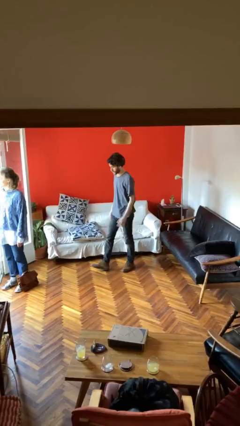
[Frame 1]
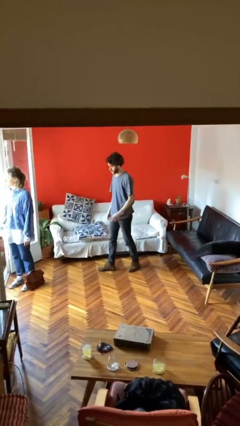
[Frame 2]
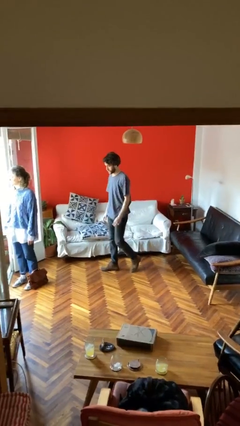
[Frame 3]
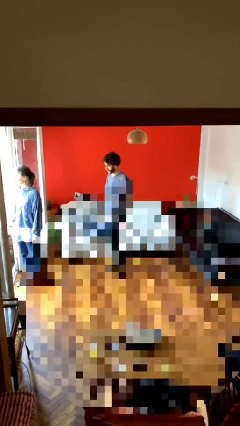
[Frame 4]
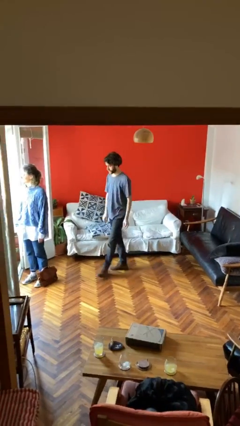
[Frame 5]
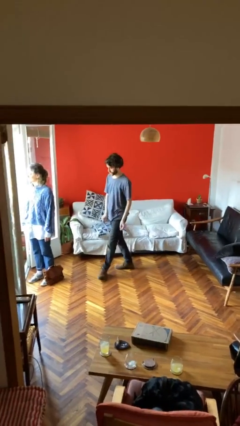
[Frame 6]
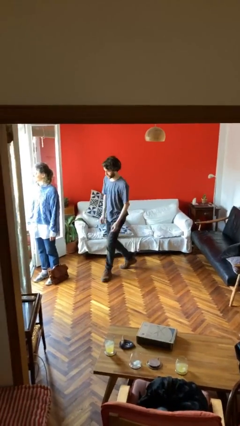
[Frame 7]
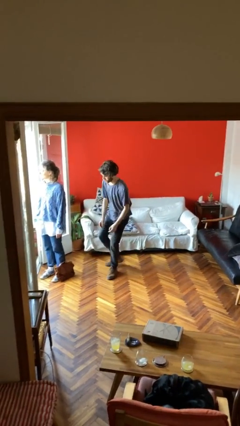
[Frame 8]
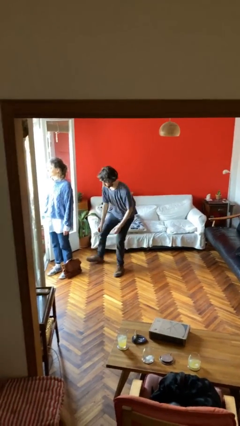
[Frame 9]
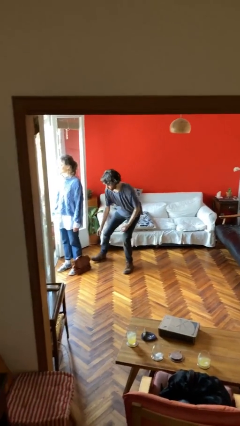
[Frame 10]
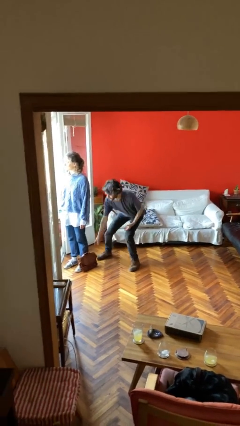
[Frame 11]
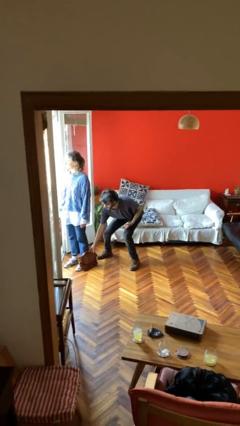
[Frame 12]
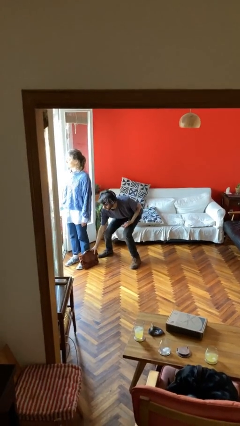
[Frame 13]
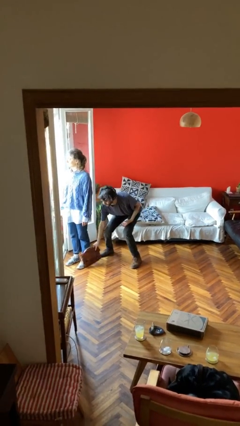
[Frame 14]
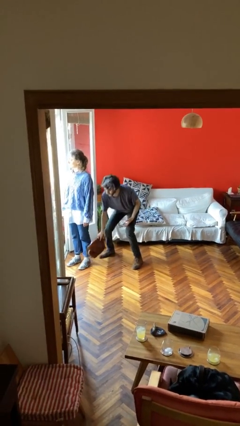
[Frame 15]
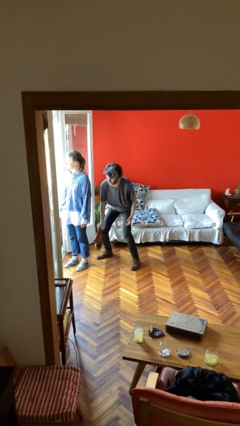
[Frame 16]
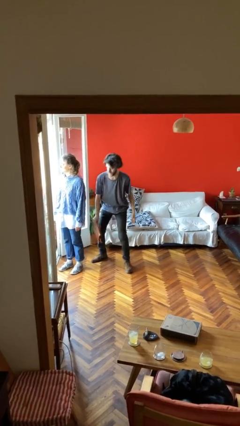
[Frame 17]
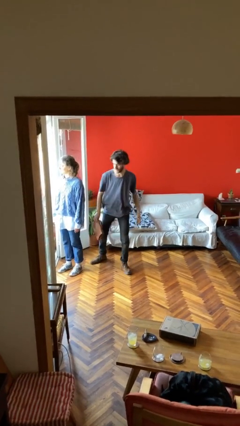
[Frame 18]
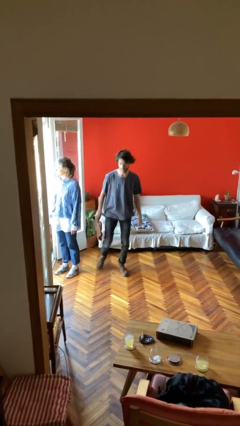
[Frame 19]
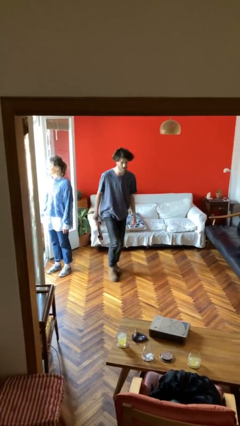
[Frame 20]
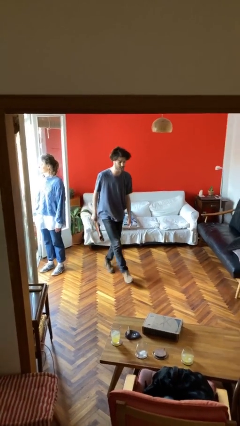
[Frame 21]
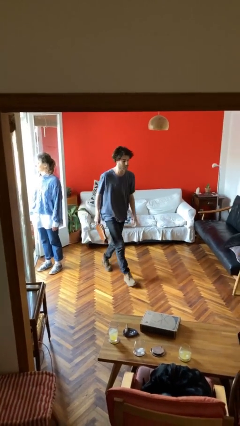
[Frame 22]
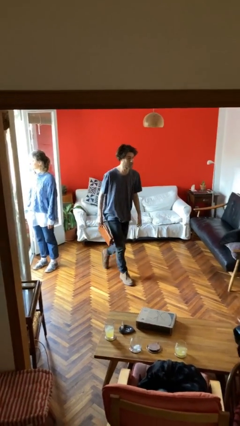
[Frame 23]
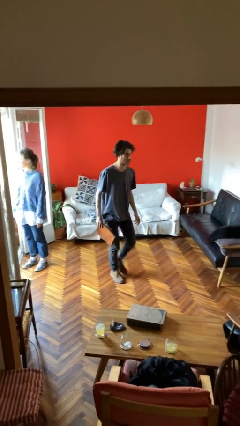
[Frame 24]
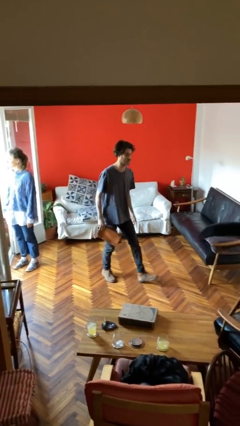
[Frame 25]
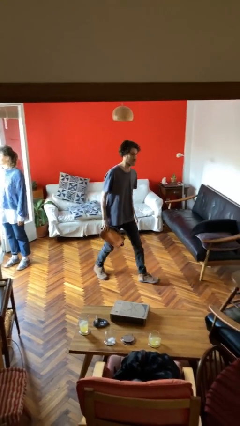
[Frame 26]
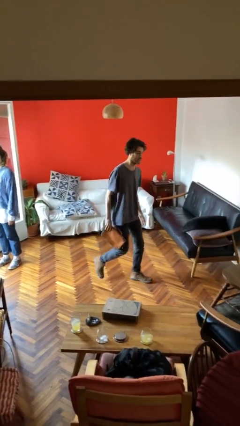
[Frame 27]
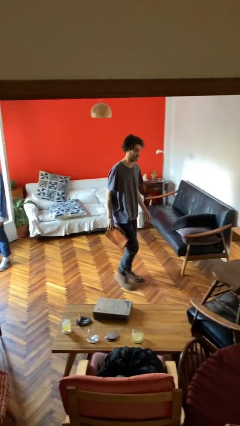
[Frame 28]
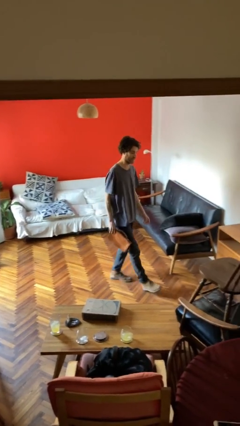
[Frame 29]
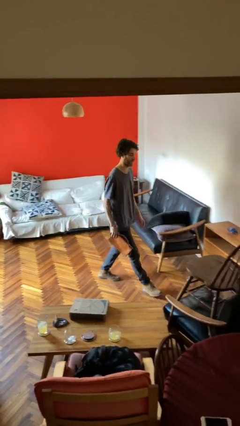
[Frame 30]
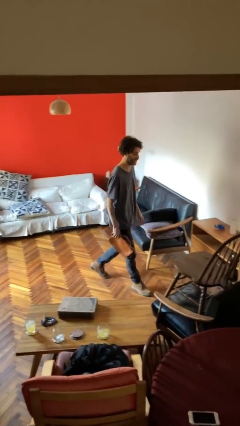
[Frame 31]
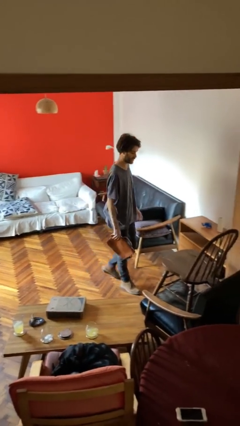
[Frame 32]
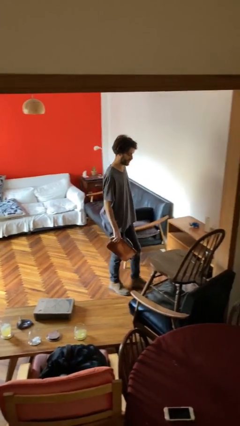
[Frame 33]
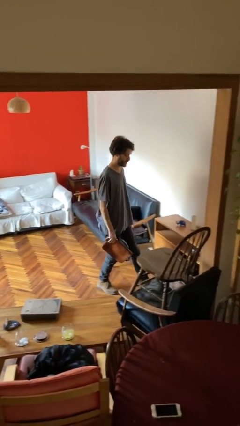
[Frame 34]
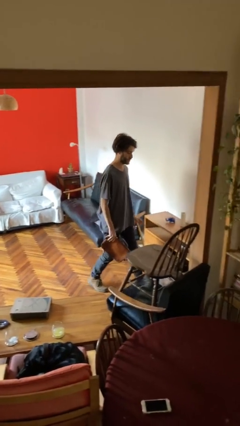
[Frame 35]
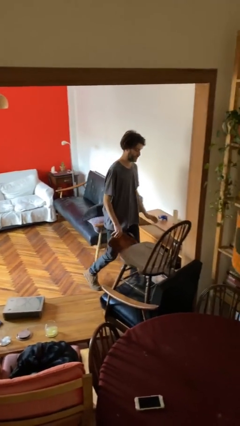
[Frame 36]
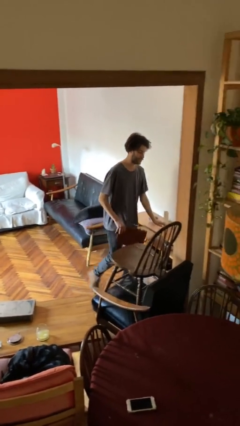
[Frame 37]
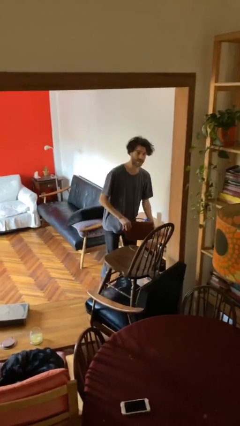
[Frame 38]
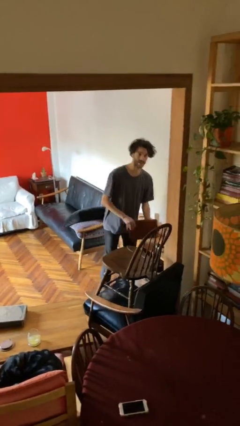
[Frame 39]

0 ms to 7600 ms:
person steals object from person

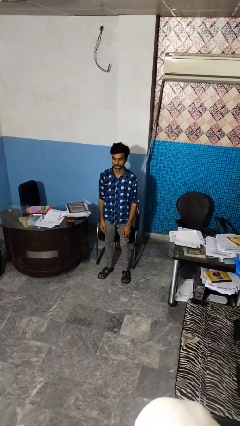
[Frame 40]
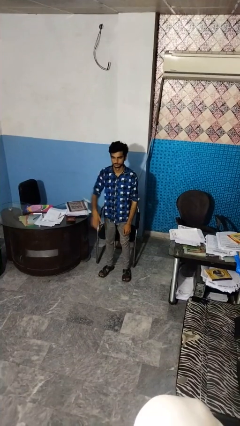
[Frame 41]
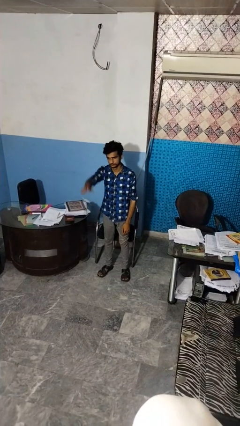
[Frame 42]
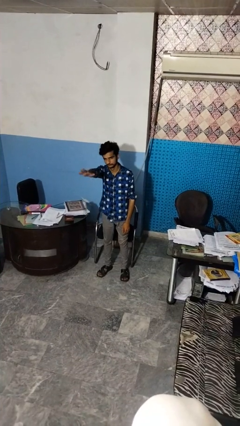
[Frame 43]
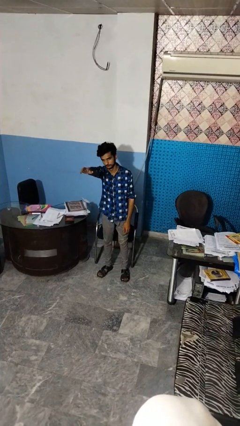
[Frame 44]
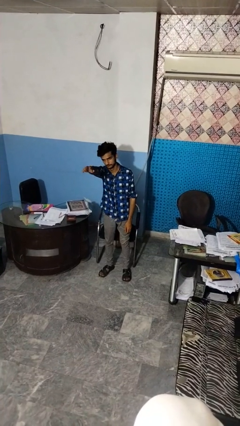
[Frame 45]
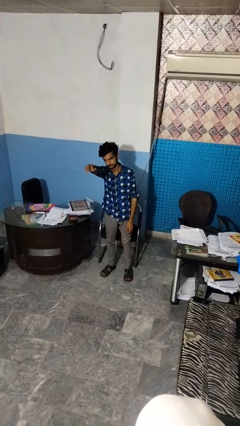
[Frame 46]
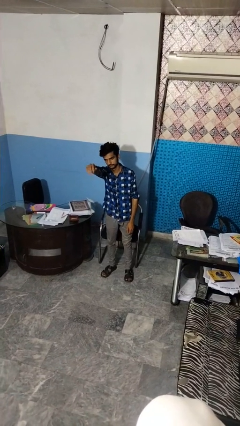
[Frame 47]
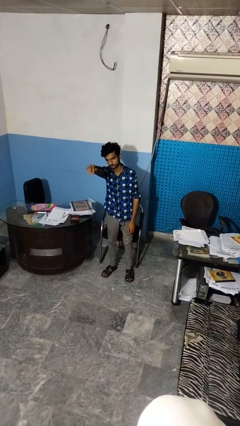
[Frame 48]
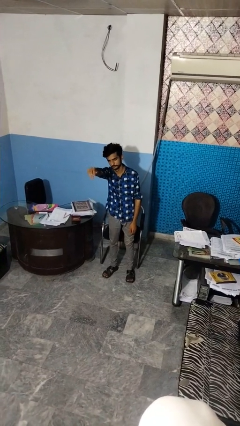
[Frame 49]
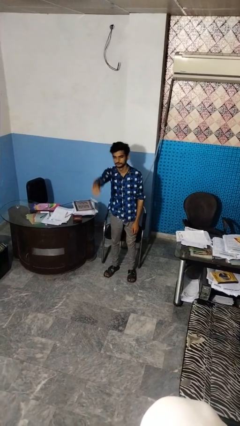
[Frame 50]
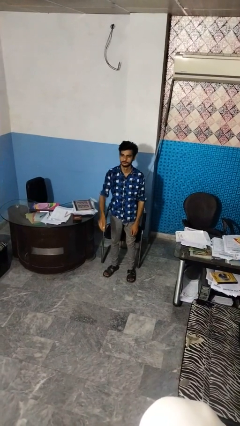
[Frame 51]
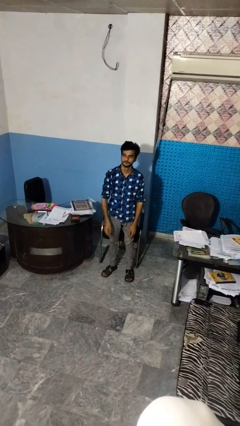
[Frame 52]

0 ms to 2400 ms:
person gestures come here

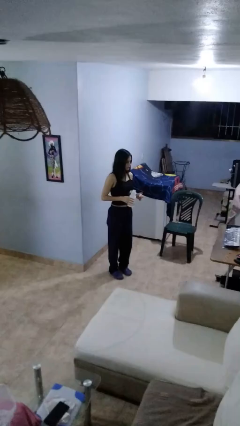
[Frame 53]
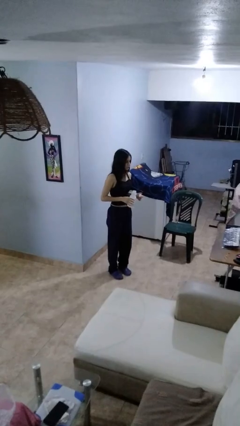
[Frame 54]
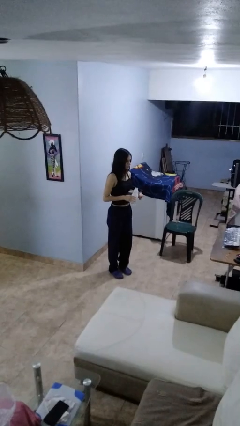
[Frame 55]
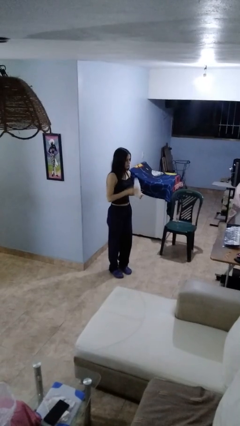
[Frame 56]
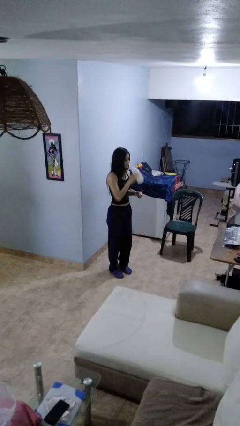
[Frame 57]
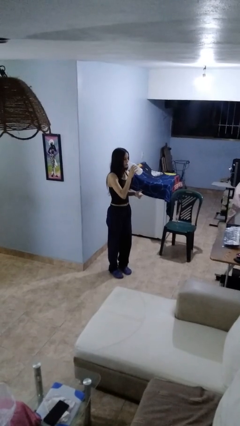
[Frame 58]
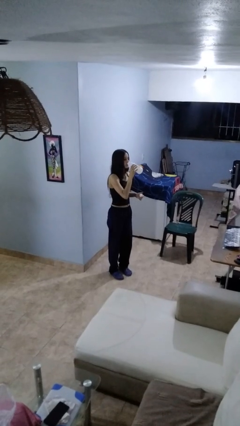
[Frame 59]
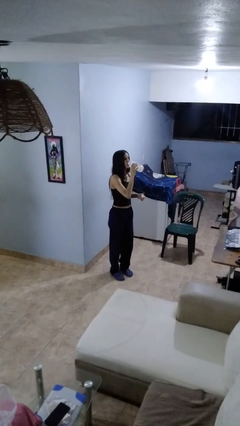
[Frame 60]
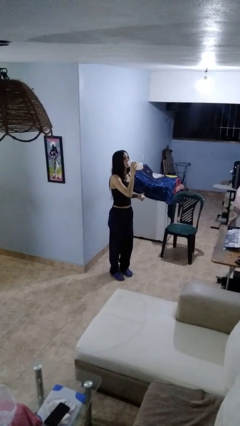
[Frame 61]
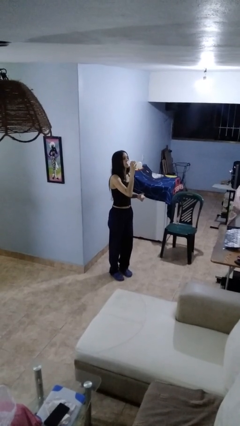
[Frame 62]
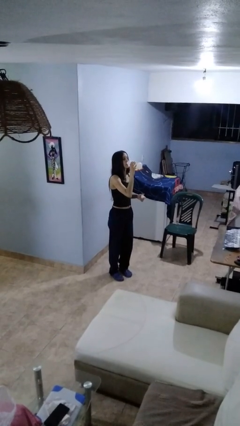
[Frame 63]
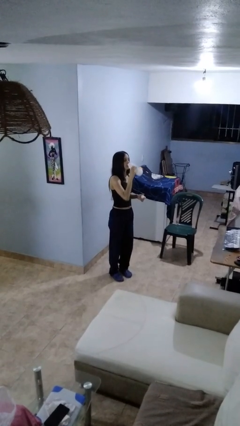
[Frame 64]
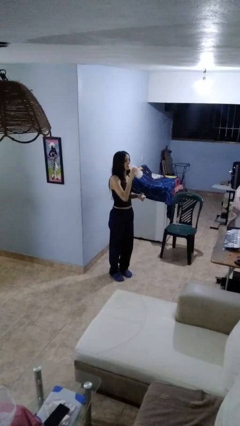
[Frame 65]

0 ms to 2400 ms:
person drinks from bottle

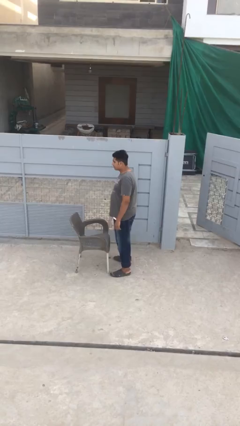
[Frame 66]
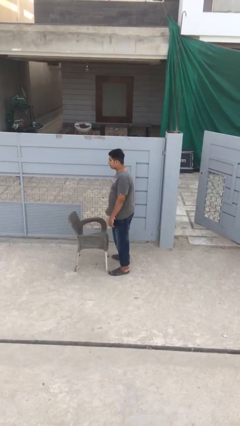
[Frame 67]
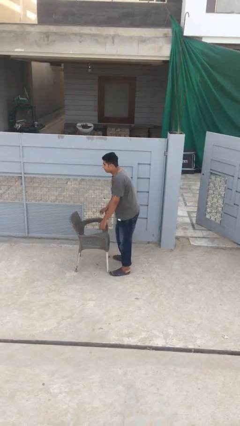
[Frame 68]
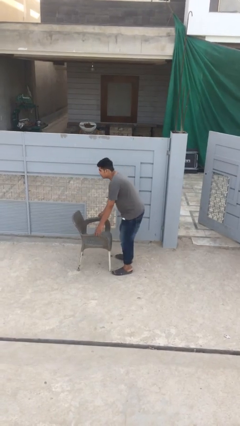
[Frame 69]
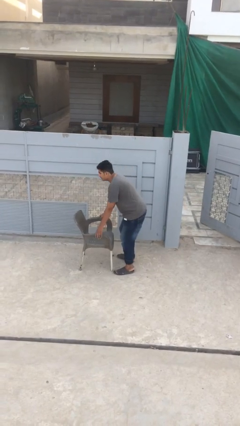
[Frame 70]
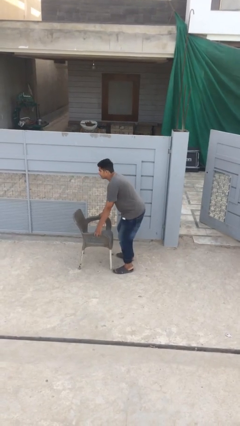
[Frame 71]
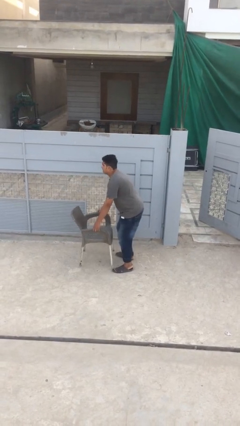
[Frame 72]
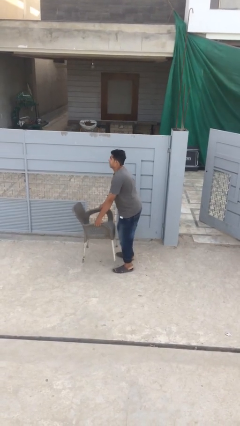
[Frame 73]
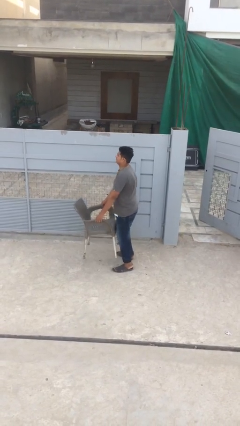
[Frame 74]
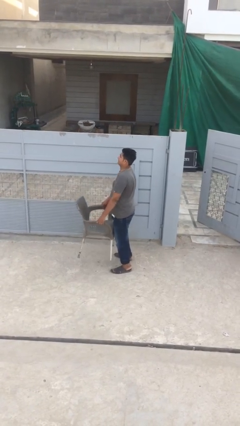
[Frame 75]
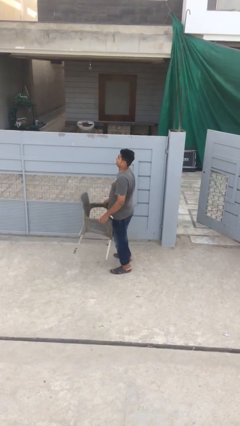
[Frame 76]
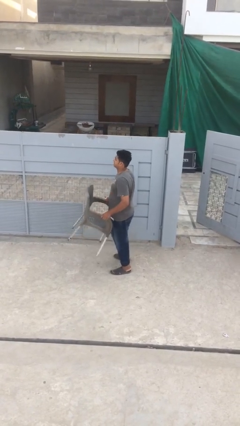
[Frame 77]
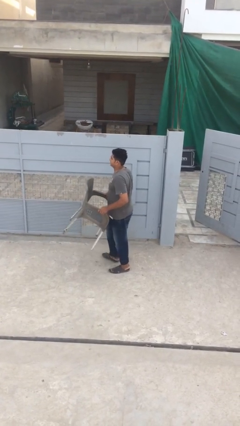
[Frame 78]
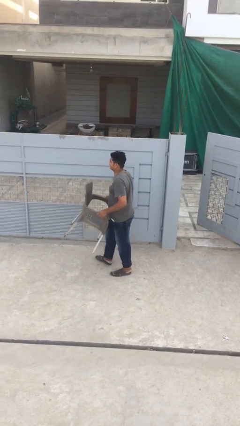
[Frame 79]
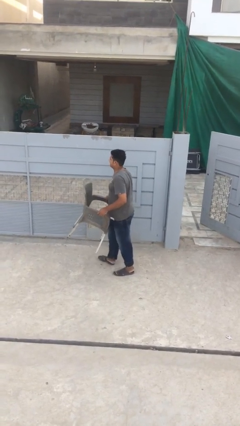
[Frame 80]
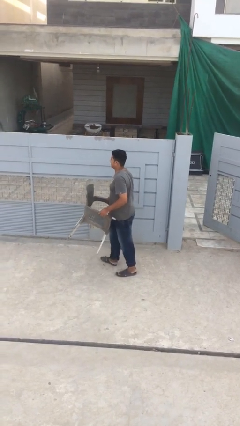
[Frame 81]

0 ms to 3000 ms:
person picks up object from floor

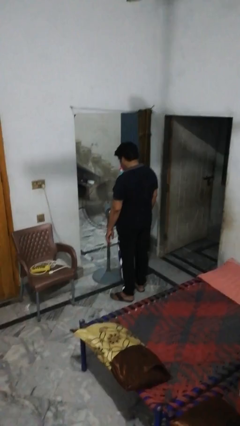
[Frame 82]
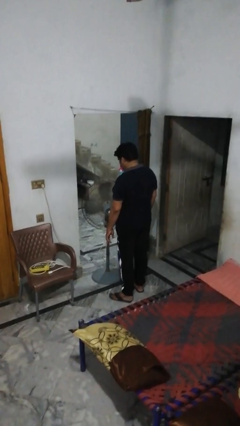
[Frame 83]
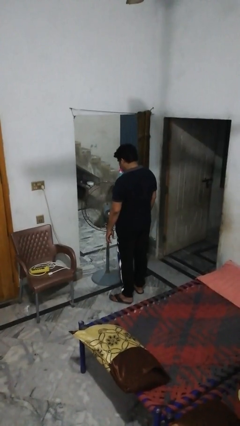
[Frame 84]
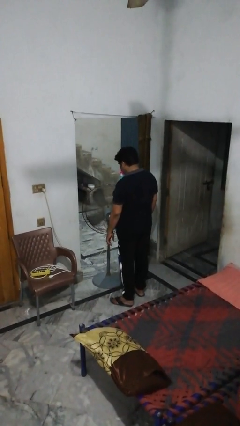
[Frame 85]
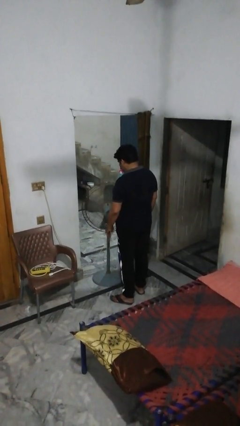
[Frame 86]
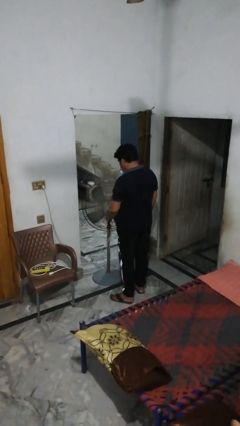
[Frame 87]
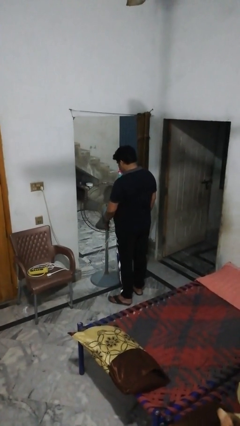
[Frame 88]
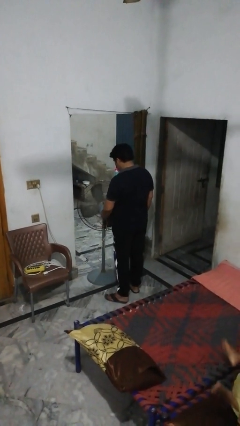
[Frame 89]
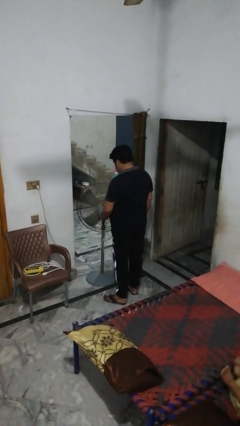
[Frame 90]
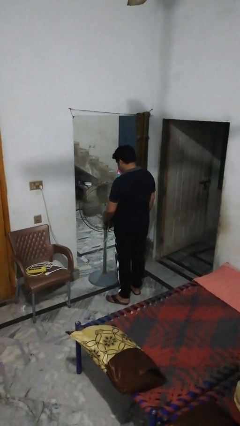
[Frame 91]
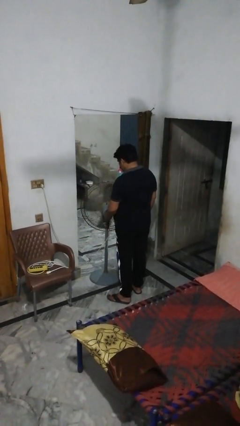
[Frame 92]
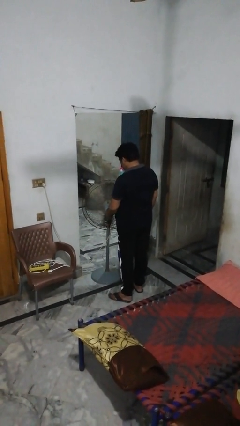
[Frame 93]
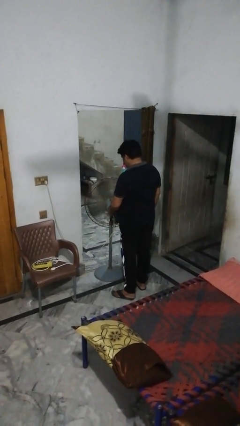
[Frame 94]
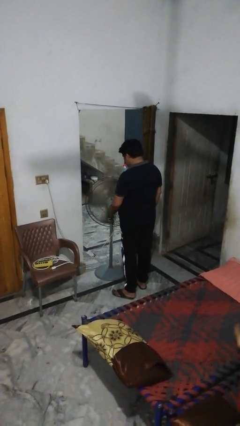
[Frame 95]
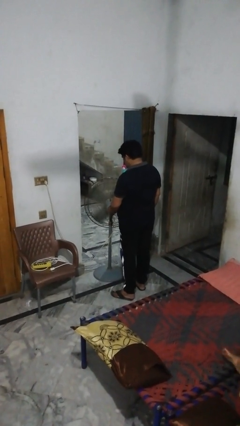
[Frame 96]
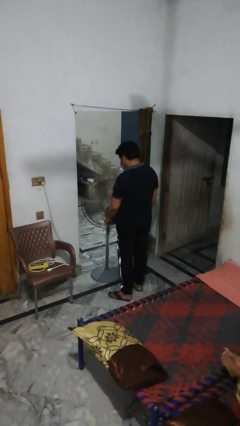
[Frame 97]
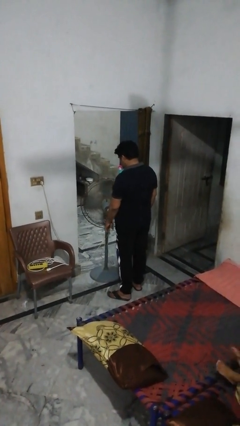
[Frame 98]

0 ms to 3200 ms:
person turns on fan
